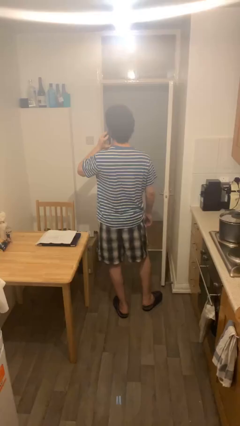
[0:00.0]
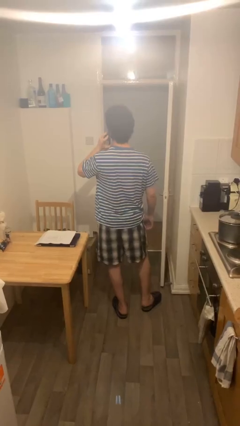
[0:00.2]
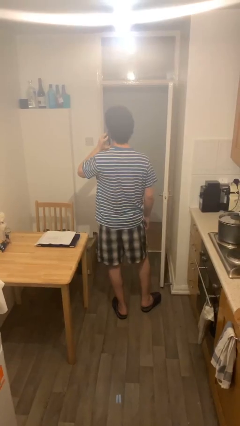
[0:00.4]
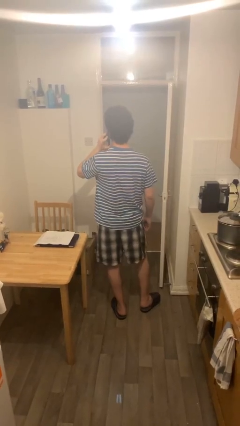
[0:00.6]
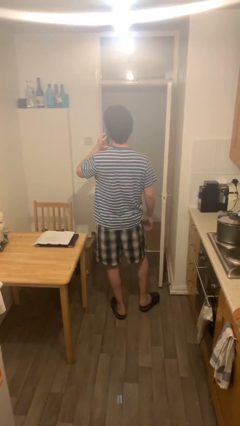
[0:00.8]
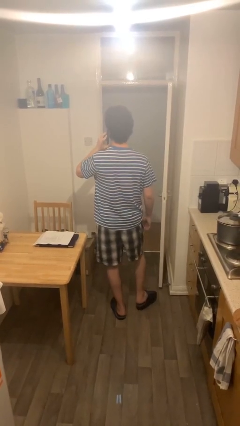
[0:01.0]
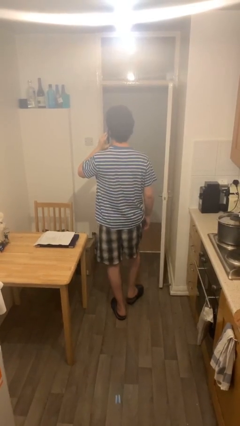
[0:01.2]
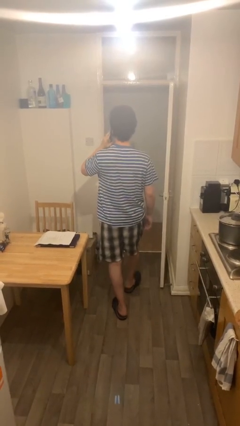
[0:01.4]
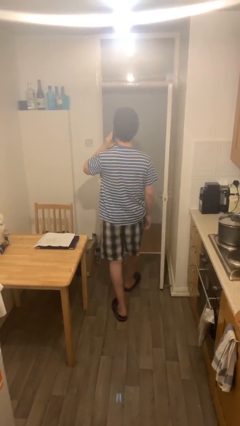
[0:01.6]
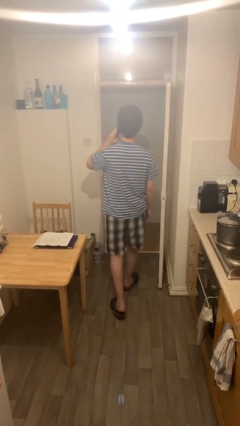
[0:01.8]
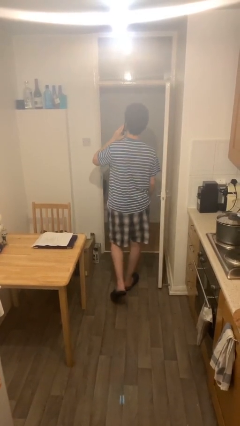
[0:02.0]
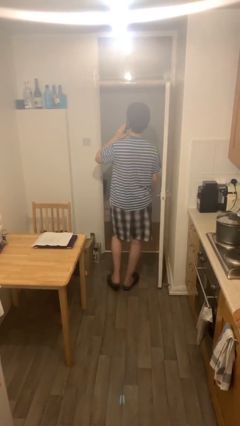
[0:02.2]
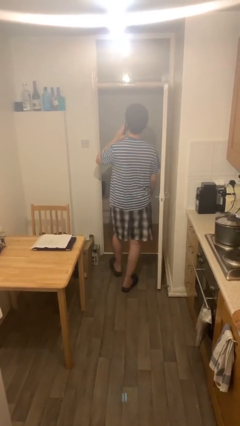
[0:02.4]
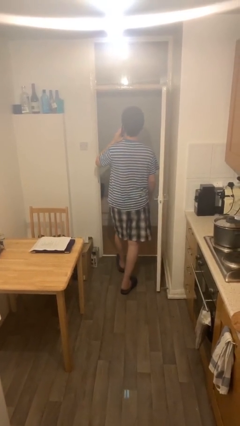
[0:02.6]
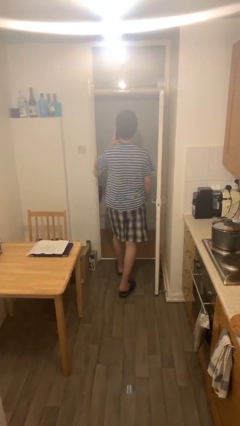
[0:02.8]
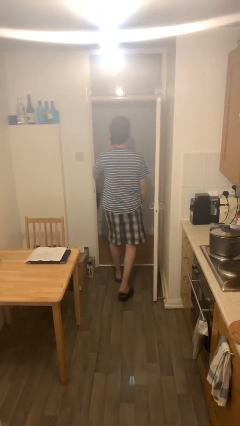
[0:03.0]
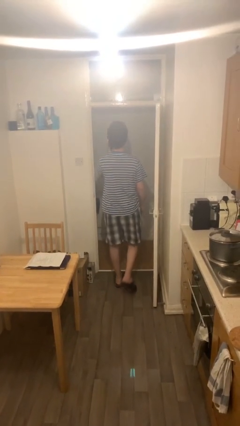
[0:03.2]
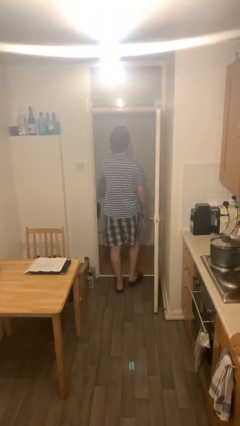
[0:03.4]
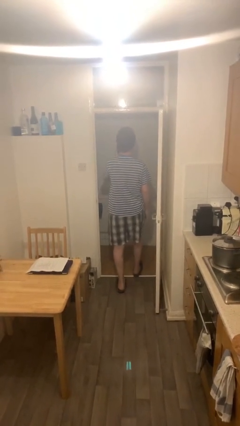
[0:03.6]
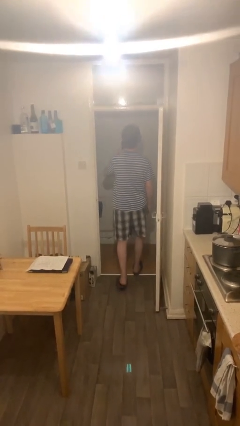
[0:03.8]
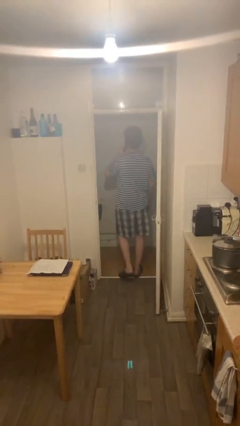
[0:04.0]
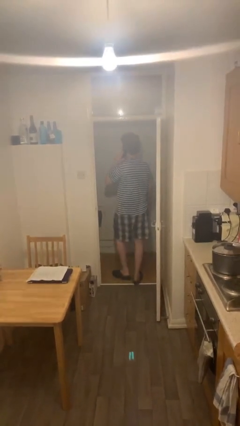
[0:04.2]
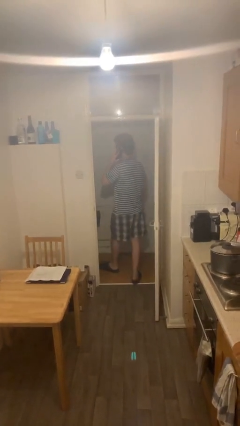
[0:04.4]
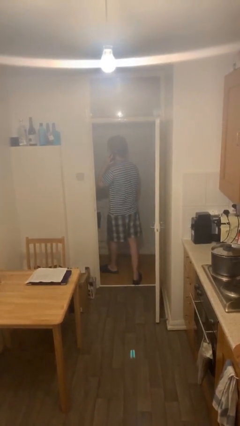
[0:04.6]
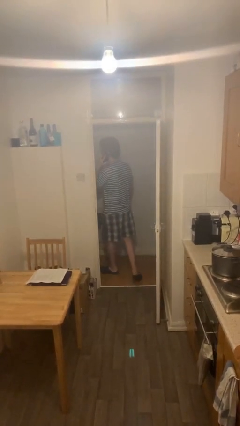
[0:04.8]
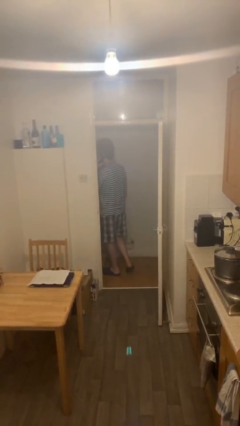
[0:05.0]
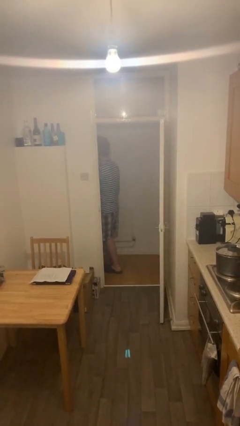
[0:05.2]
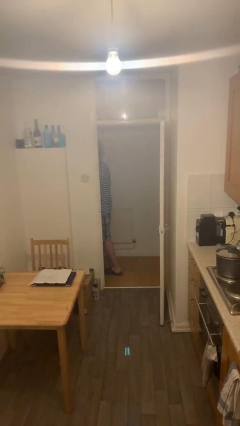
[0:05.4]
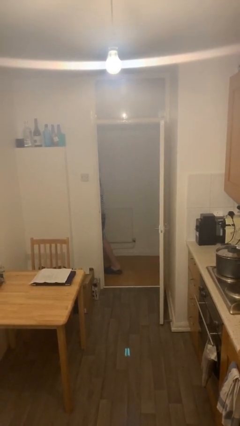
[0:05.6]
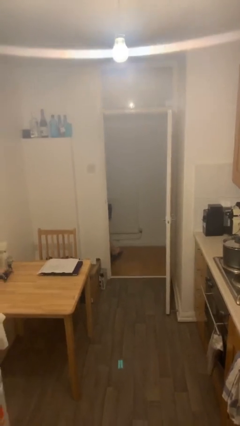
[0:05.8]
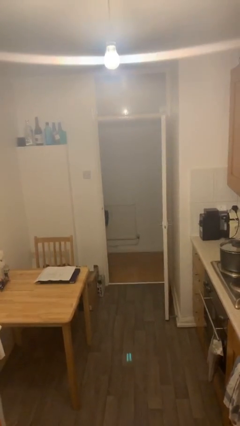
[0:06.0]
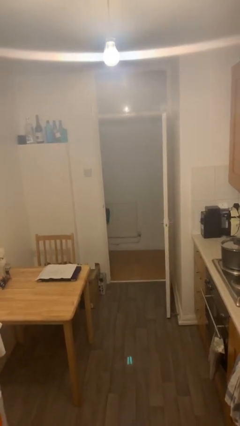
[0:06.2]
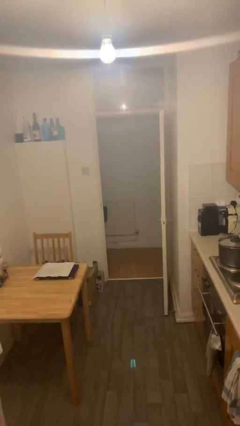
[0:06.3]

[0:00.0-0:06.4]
person exits scene through structure

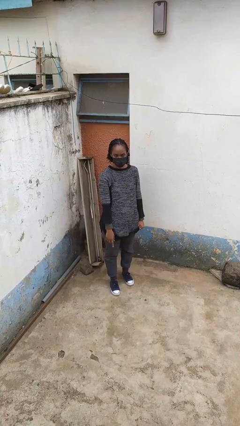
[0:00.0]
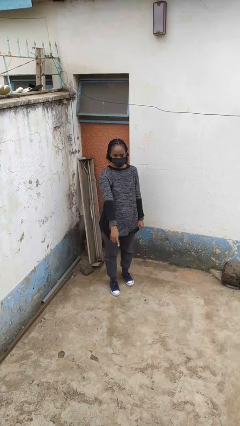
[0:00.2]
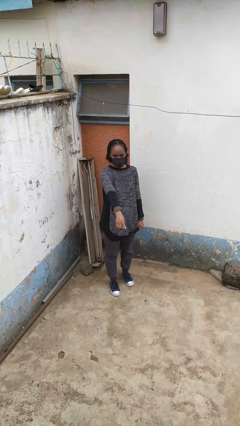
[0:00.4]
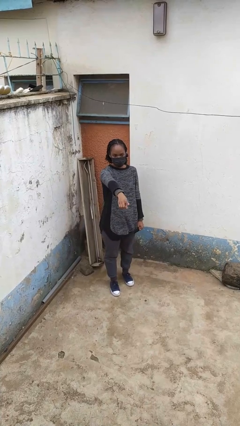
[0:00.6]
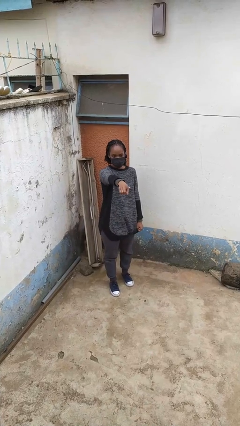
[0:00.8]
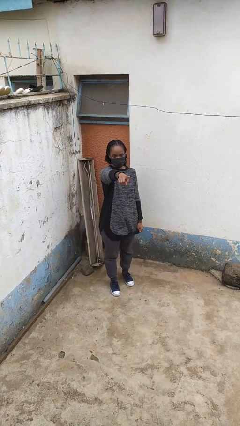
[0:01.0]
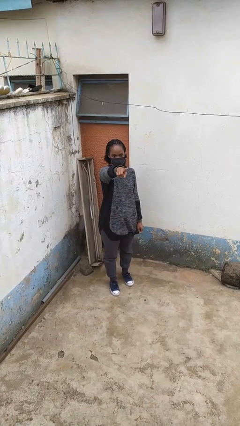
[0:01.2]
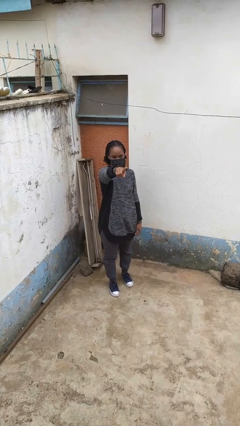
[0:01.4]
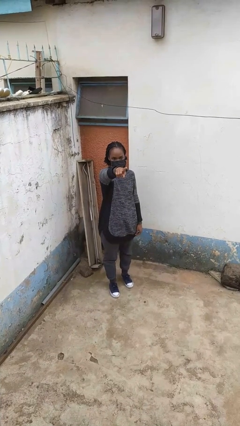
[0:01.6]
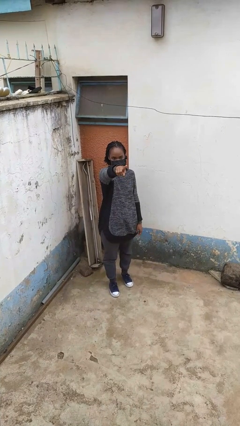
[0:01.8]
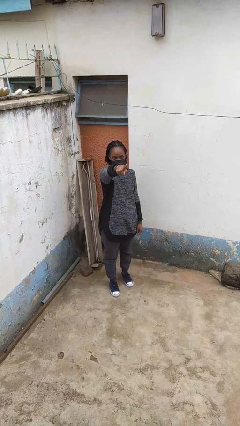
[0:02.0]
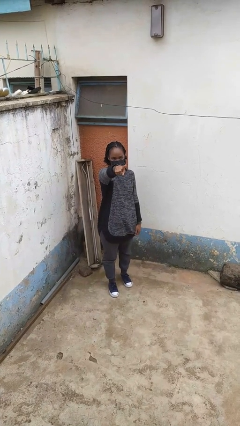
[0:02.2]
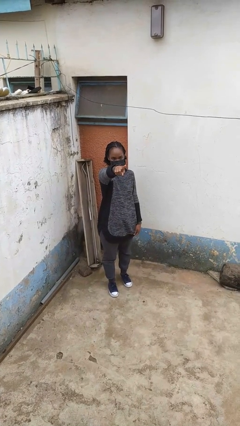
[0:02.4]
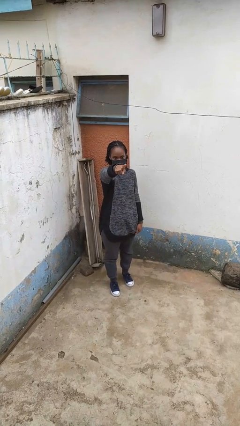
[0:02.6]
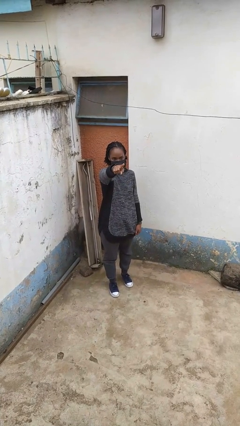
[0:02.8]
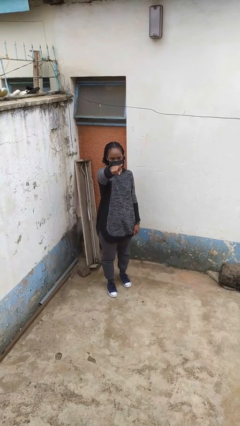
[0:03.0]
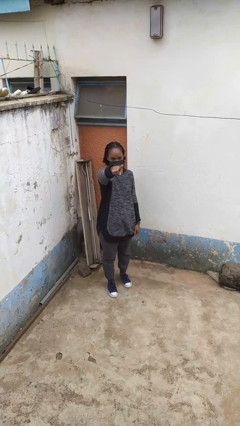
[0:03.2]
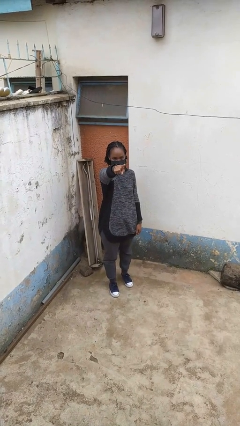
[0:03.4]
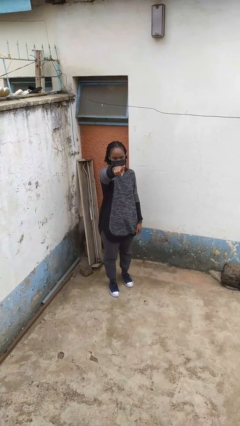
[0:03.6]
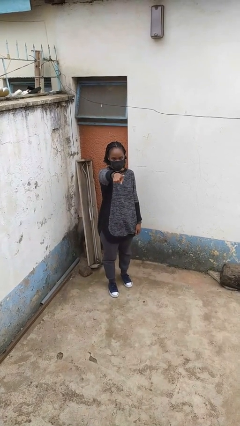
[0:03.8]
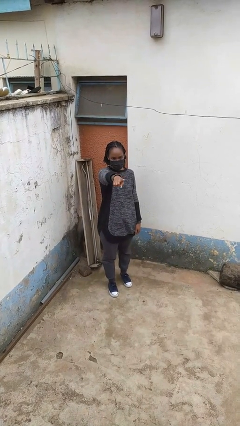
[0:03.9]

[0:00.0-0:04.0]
person points at person

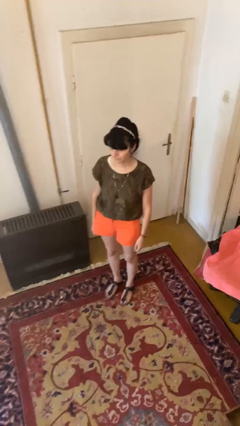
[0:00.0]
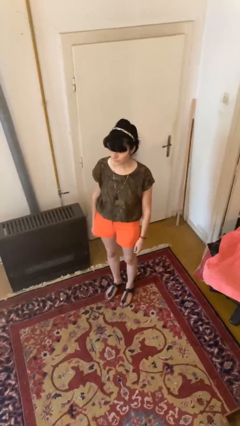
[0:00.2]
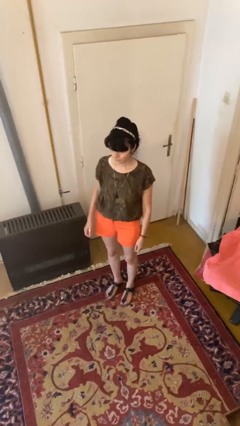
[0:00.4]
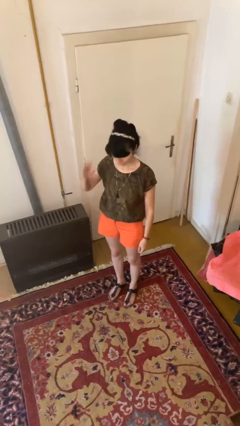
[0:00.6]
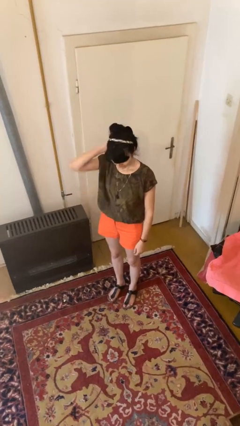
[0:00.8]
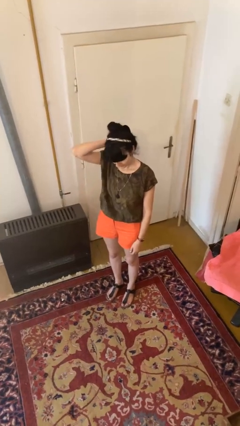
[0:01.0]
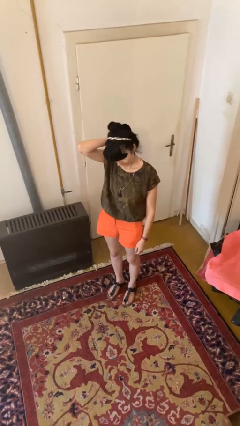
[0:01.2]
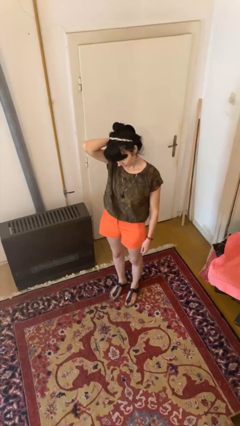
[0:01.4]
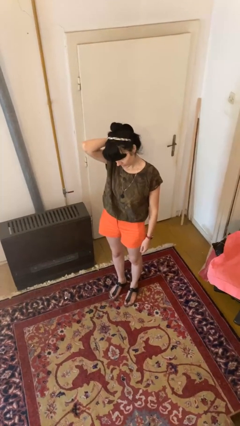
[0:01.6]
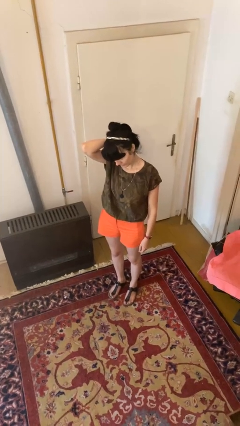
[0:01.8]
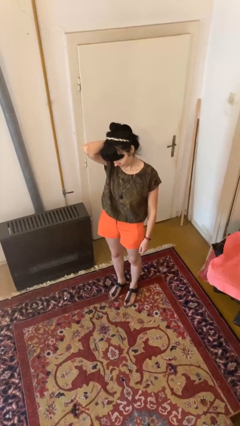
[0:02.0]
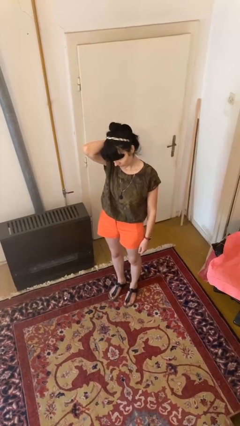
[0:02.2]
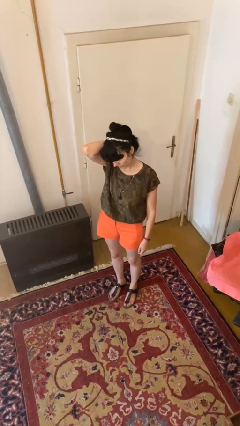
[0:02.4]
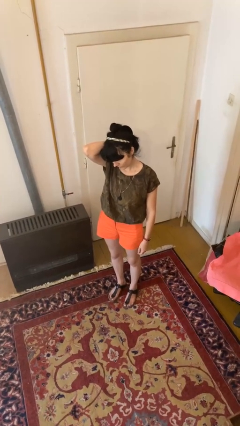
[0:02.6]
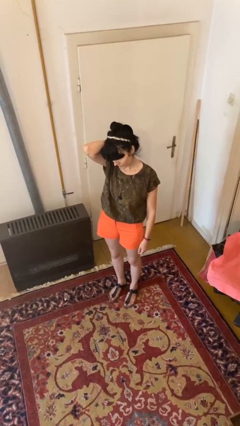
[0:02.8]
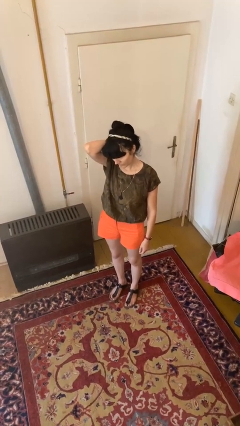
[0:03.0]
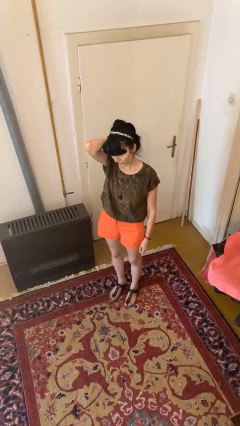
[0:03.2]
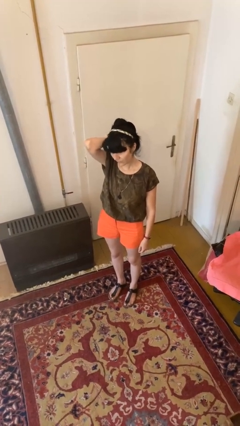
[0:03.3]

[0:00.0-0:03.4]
person scratches face

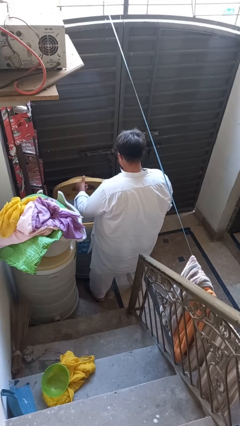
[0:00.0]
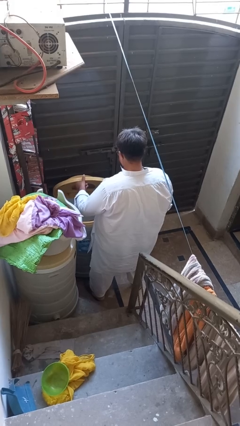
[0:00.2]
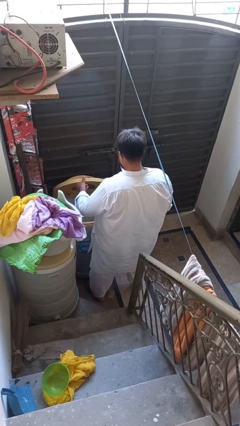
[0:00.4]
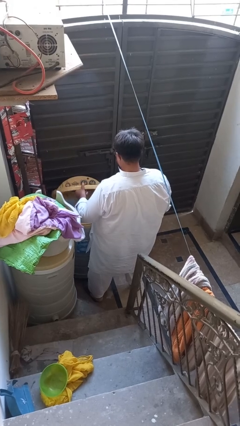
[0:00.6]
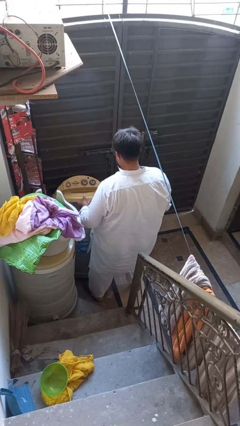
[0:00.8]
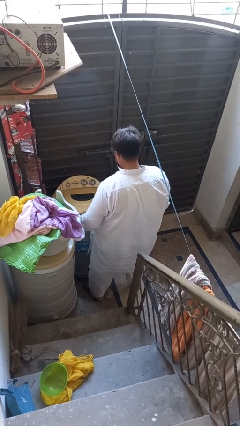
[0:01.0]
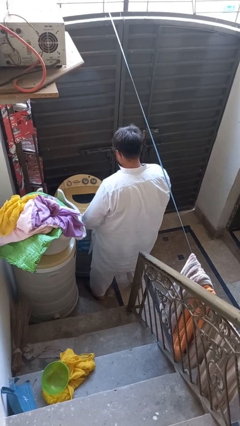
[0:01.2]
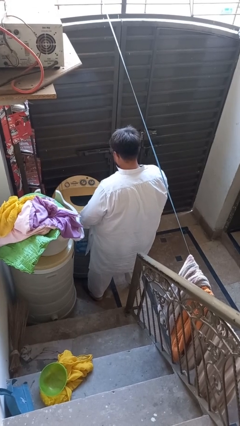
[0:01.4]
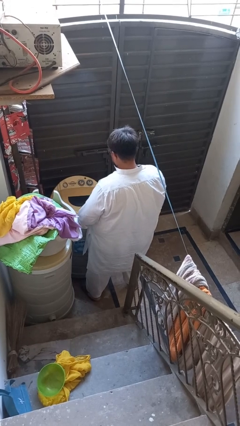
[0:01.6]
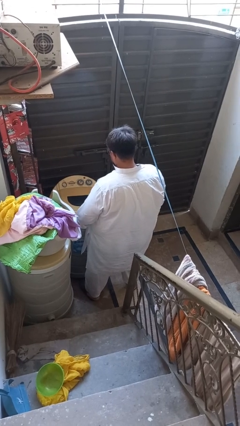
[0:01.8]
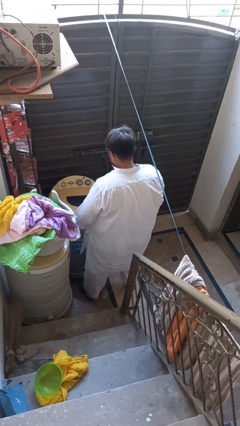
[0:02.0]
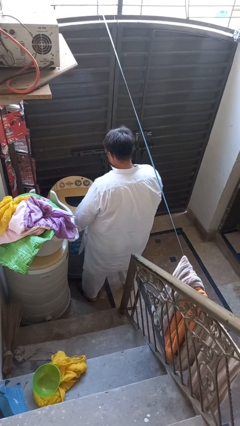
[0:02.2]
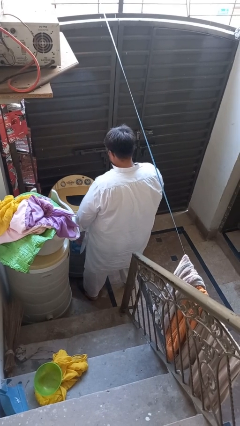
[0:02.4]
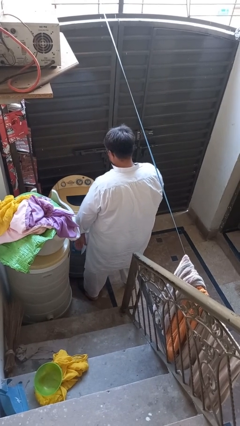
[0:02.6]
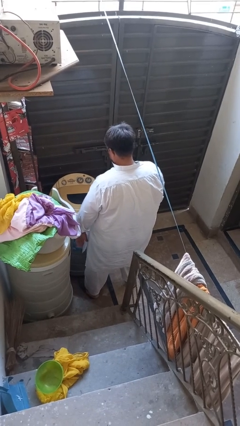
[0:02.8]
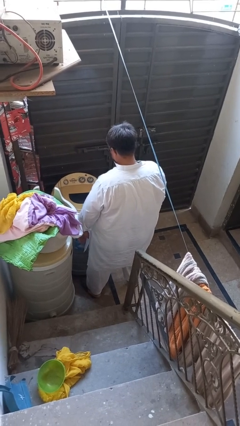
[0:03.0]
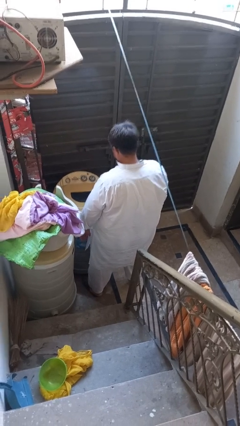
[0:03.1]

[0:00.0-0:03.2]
person closes clothes washer

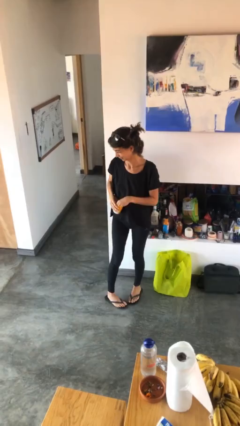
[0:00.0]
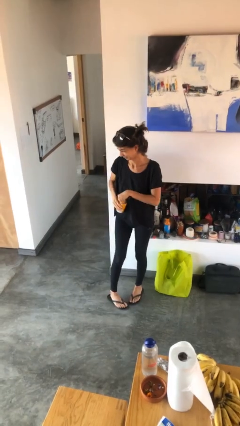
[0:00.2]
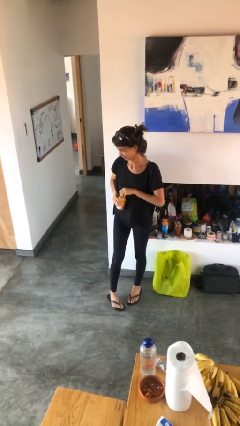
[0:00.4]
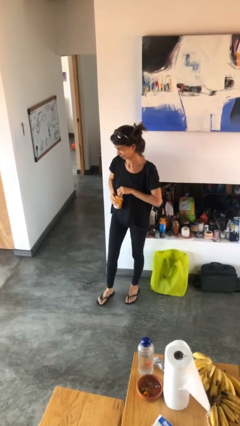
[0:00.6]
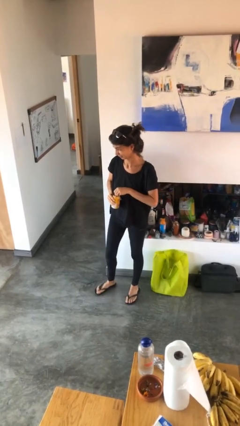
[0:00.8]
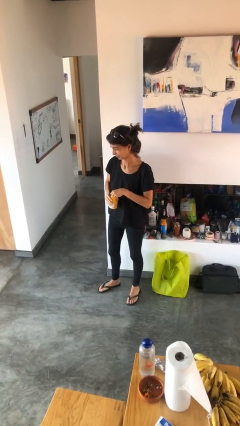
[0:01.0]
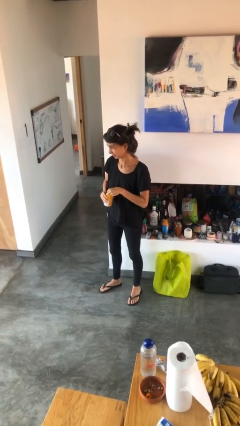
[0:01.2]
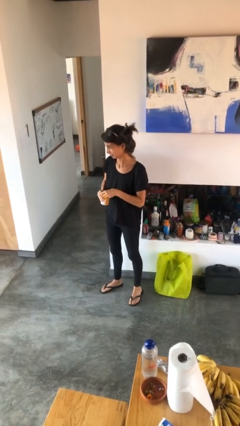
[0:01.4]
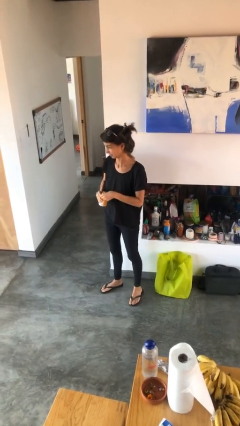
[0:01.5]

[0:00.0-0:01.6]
person opens beverage can
